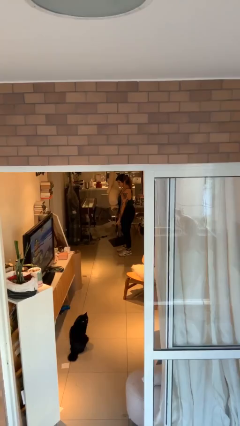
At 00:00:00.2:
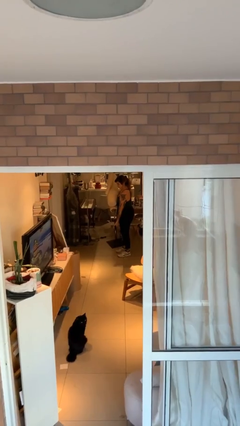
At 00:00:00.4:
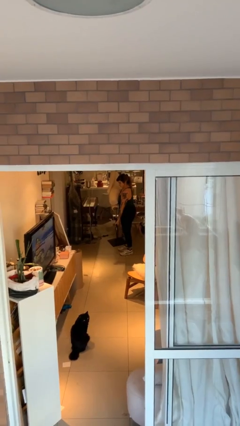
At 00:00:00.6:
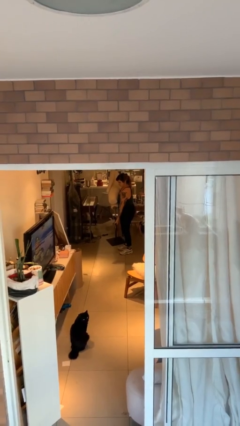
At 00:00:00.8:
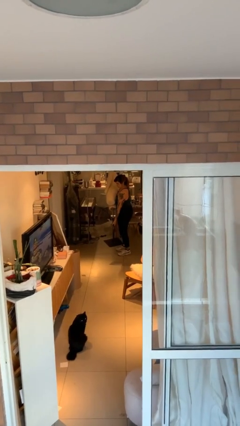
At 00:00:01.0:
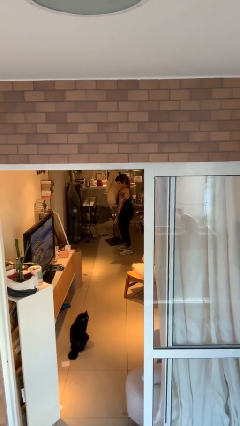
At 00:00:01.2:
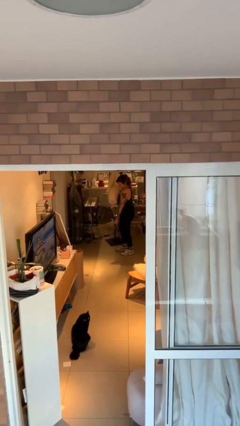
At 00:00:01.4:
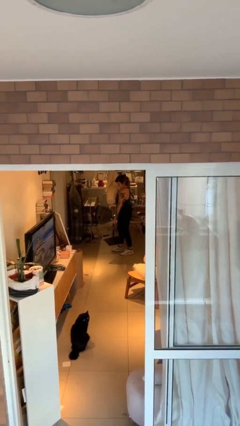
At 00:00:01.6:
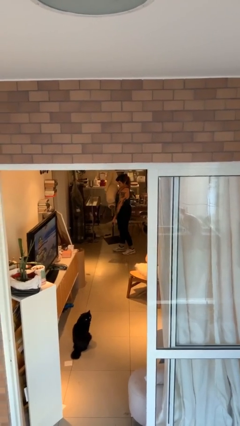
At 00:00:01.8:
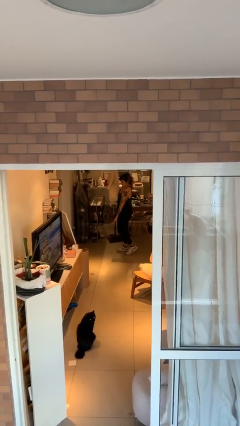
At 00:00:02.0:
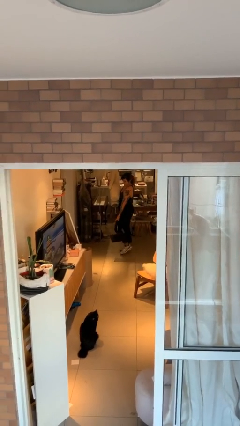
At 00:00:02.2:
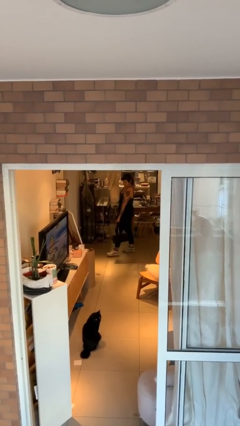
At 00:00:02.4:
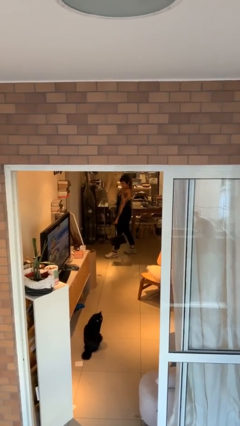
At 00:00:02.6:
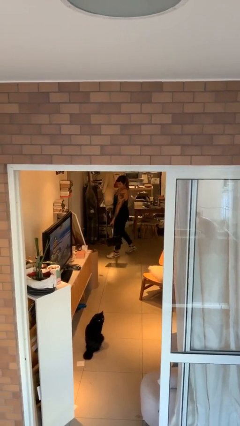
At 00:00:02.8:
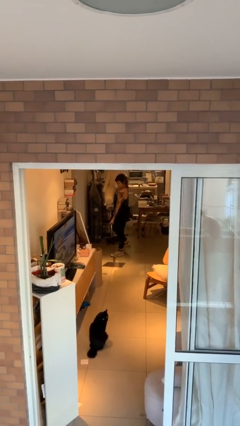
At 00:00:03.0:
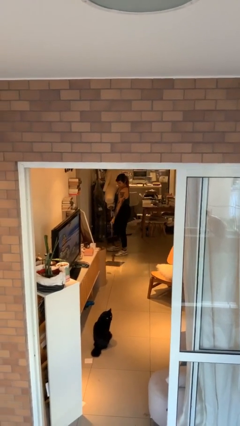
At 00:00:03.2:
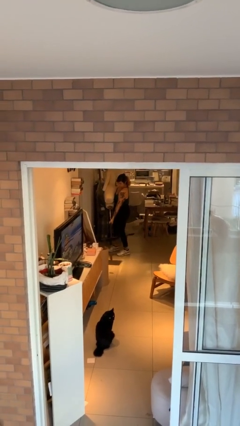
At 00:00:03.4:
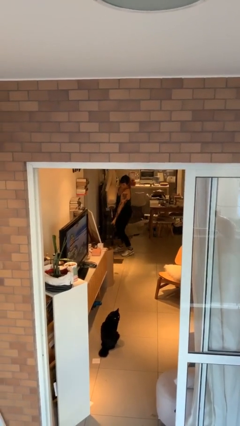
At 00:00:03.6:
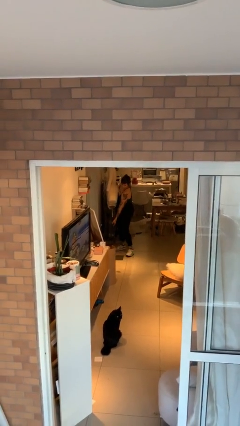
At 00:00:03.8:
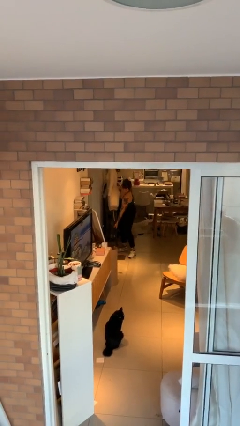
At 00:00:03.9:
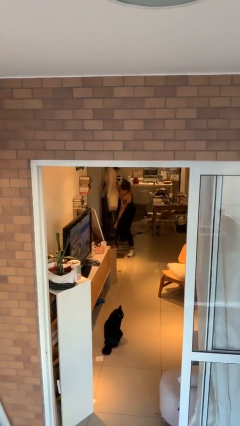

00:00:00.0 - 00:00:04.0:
person carries heavy object

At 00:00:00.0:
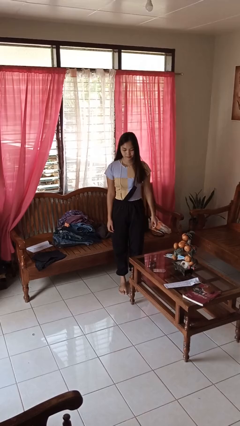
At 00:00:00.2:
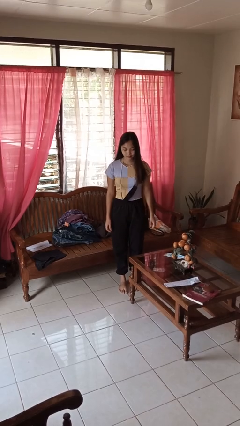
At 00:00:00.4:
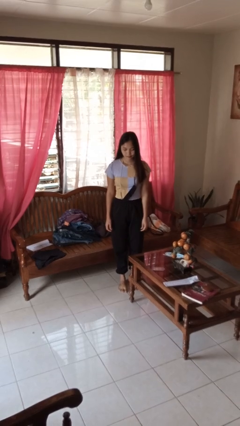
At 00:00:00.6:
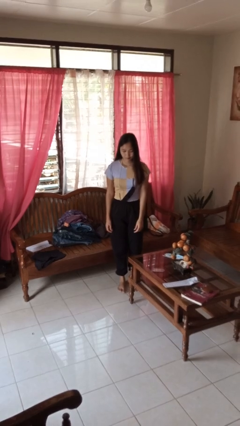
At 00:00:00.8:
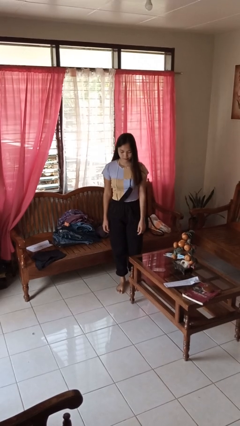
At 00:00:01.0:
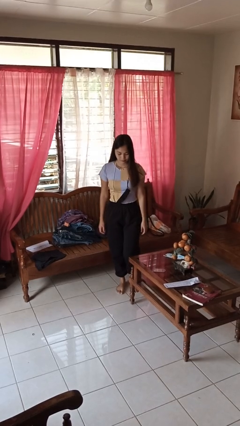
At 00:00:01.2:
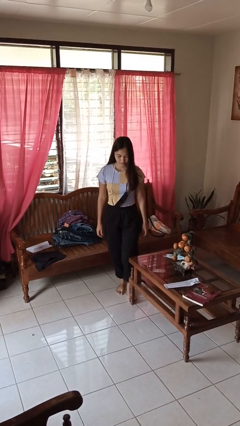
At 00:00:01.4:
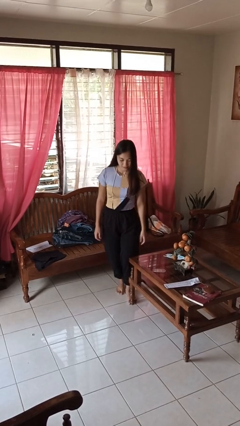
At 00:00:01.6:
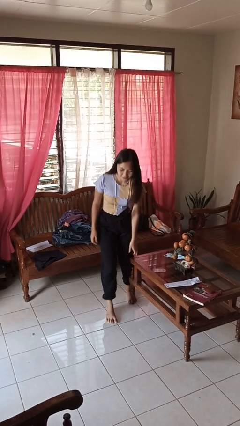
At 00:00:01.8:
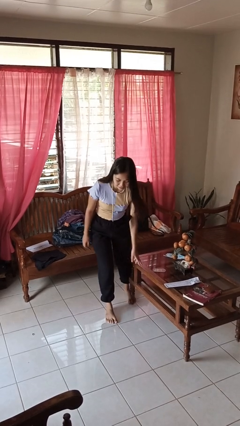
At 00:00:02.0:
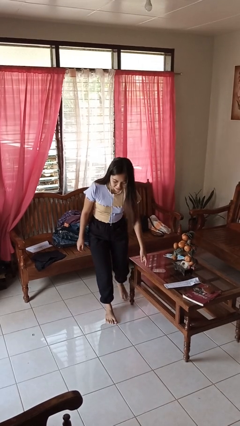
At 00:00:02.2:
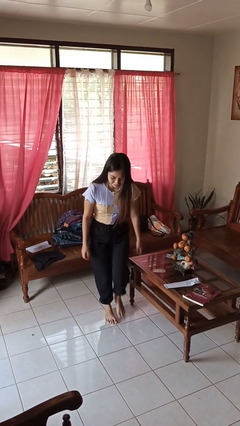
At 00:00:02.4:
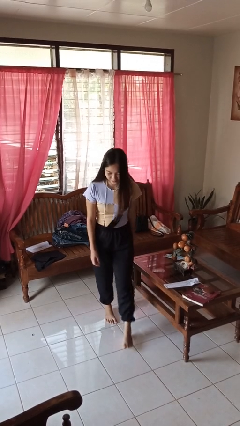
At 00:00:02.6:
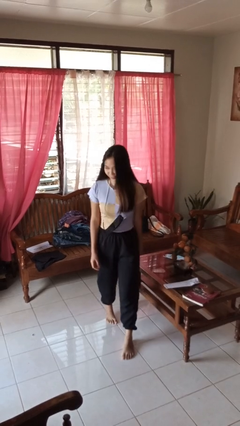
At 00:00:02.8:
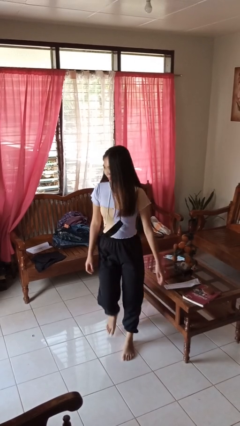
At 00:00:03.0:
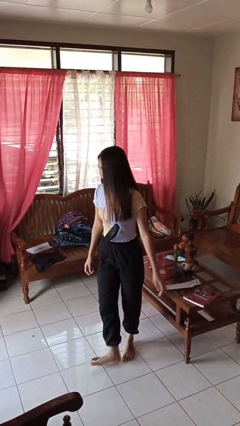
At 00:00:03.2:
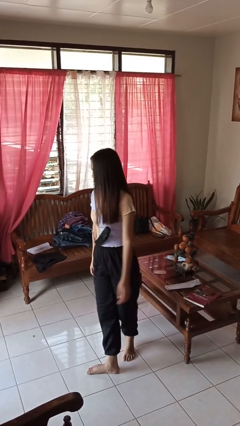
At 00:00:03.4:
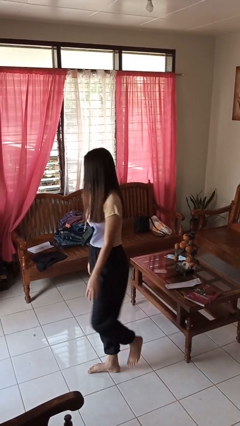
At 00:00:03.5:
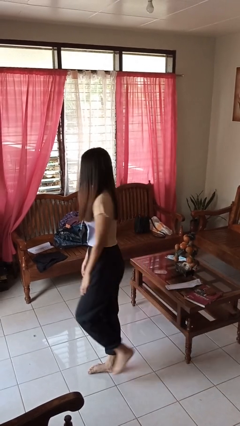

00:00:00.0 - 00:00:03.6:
person bumps into table

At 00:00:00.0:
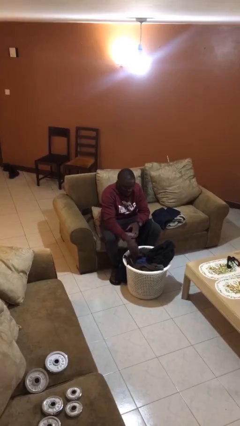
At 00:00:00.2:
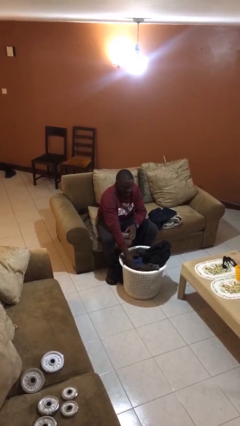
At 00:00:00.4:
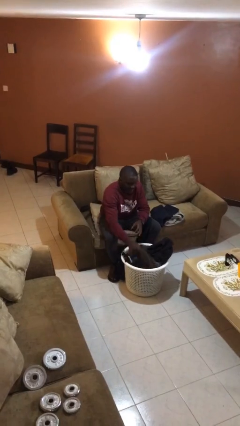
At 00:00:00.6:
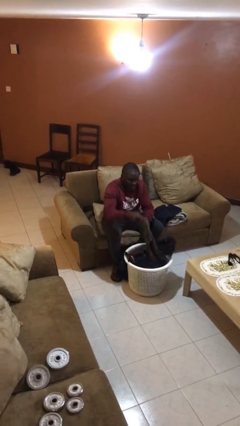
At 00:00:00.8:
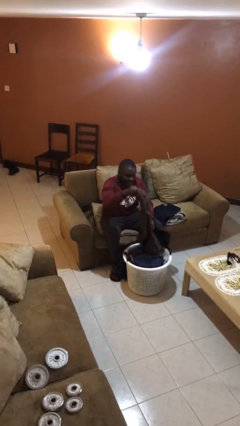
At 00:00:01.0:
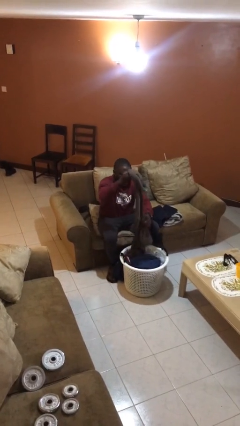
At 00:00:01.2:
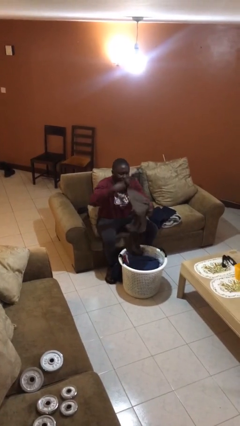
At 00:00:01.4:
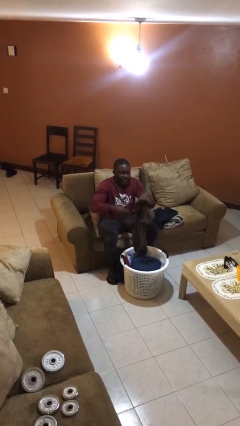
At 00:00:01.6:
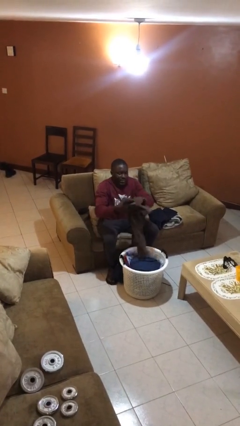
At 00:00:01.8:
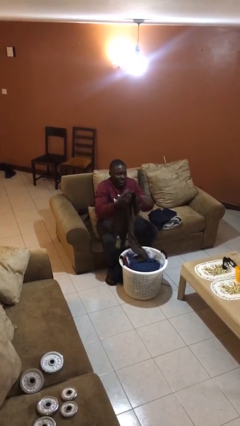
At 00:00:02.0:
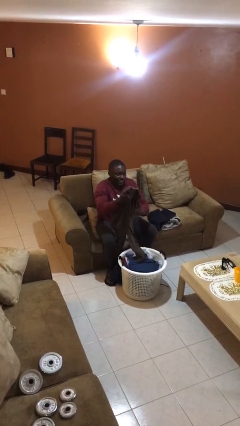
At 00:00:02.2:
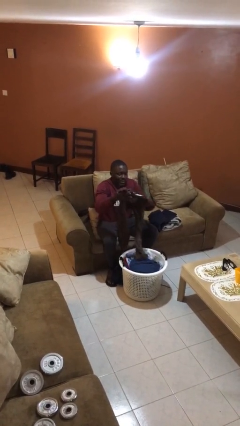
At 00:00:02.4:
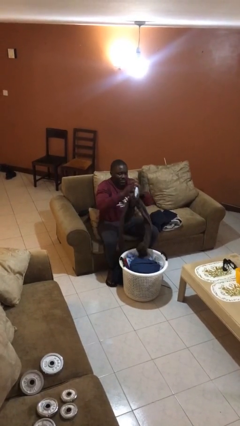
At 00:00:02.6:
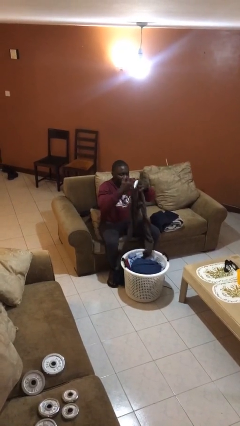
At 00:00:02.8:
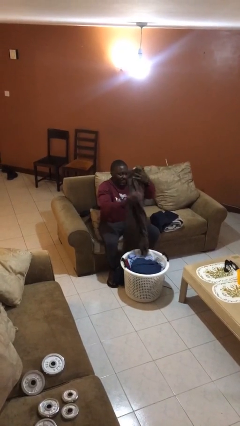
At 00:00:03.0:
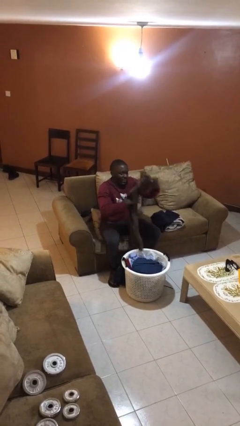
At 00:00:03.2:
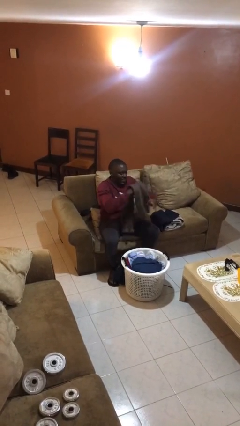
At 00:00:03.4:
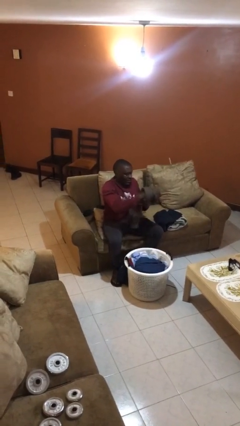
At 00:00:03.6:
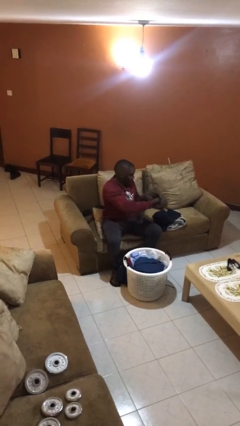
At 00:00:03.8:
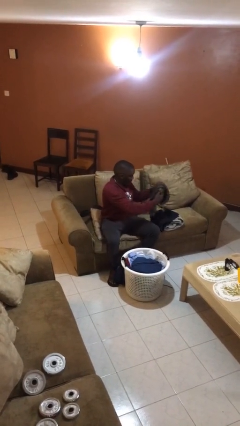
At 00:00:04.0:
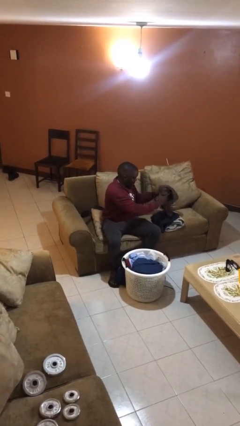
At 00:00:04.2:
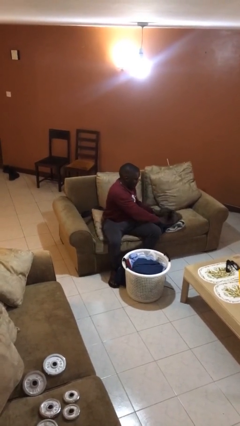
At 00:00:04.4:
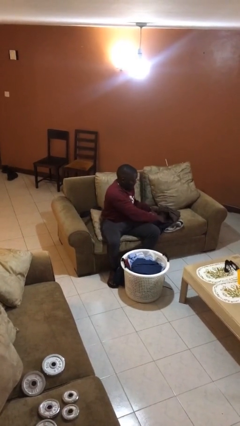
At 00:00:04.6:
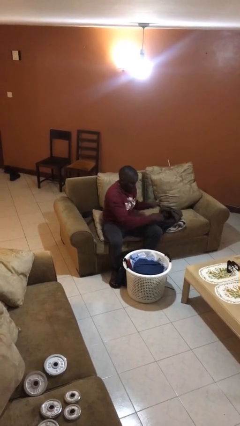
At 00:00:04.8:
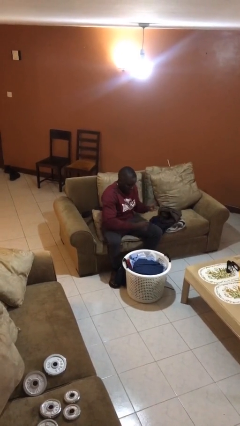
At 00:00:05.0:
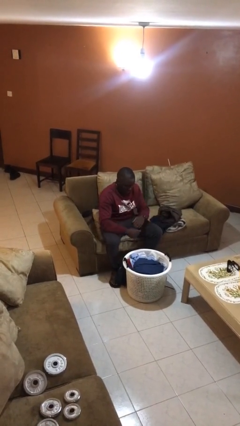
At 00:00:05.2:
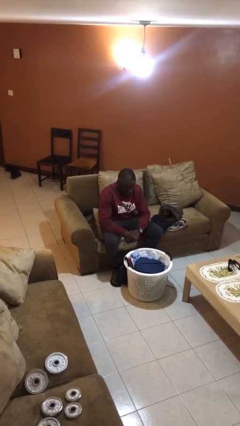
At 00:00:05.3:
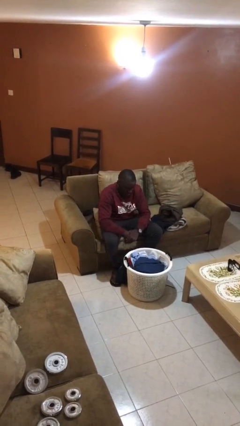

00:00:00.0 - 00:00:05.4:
person folds pants

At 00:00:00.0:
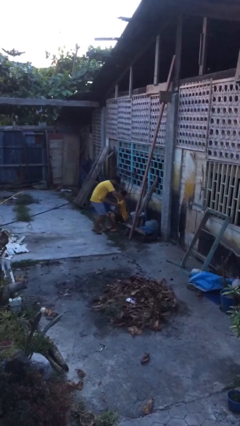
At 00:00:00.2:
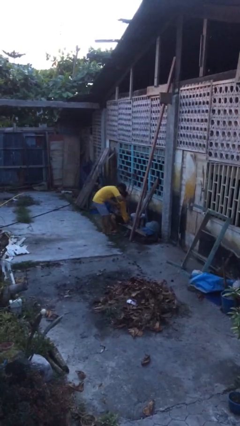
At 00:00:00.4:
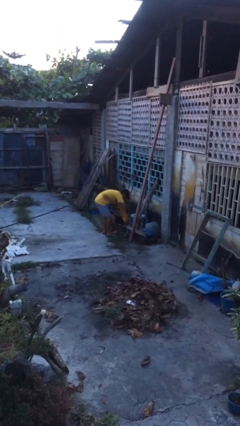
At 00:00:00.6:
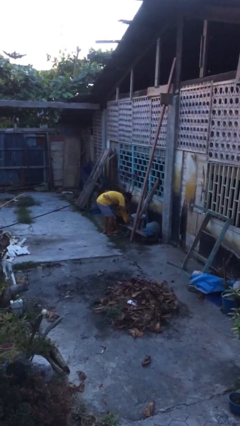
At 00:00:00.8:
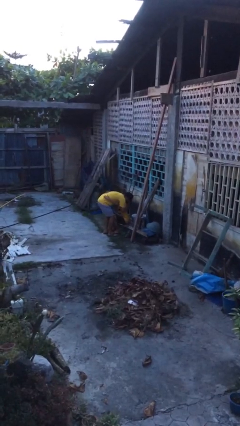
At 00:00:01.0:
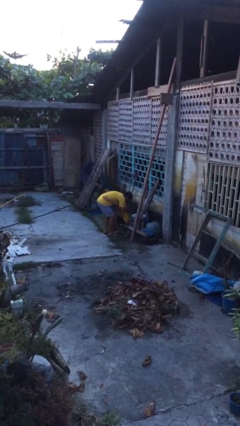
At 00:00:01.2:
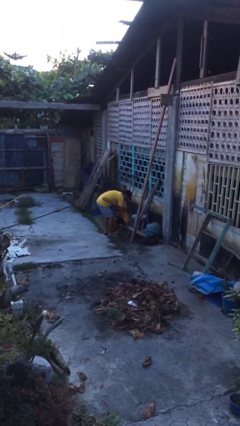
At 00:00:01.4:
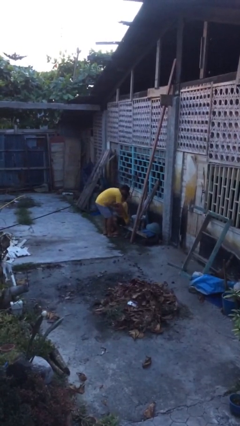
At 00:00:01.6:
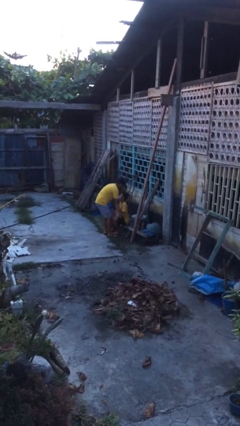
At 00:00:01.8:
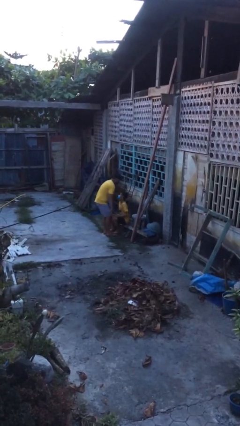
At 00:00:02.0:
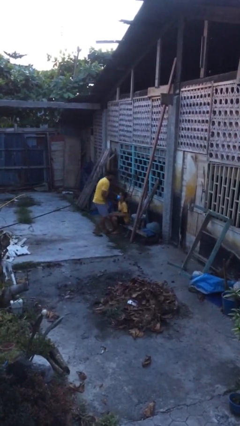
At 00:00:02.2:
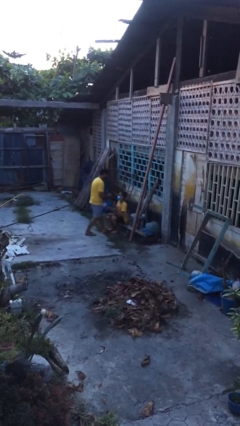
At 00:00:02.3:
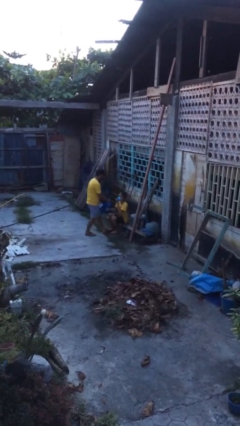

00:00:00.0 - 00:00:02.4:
person embraces person

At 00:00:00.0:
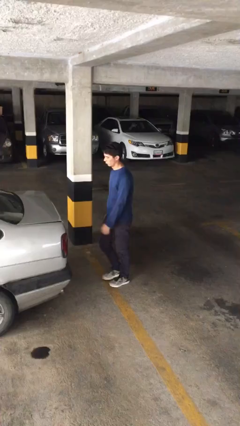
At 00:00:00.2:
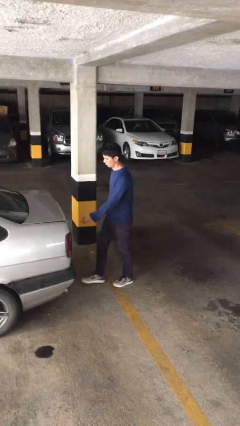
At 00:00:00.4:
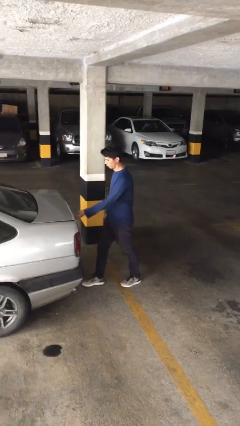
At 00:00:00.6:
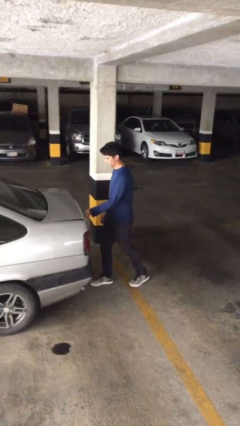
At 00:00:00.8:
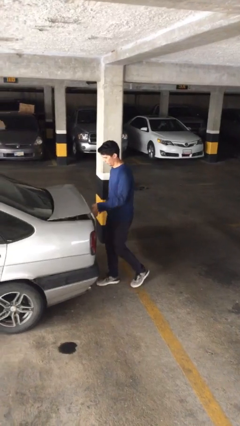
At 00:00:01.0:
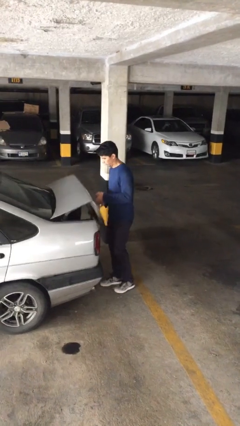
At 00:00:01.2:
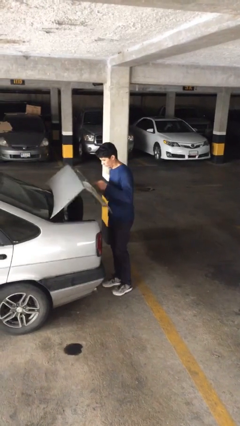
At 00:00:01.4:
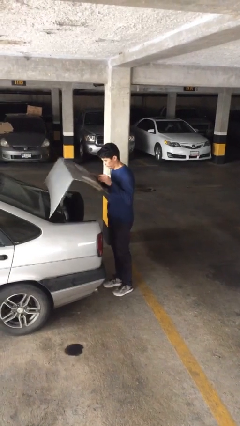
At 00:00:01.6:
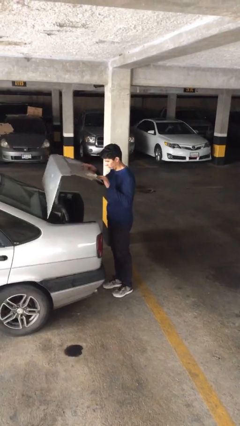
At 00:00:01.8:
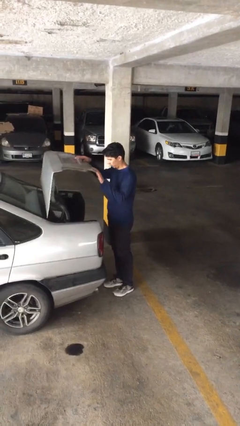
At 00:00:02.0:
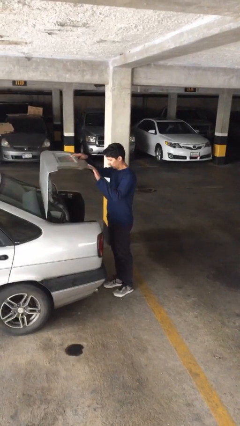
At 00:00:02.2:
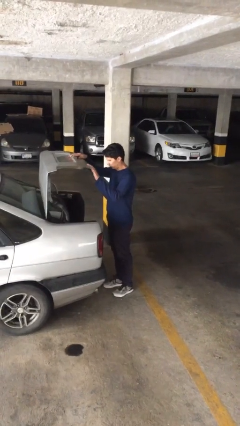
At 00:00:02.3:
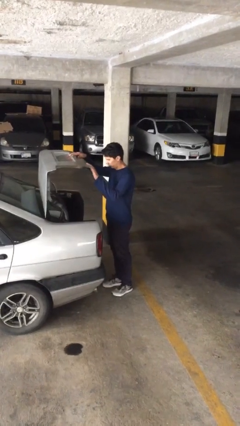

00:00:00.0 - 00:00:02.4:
person opens car trunk
